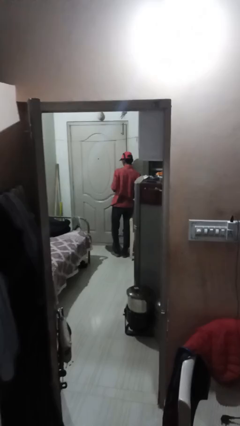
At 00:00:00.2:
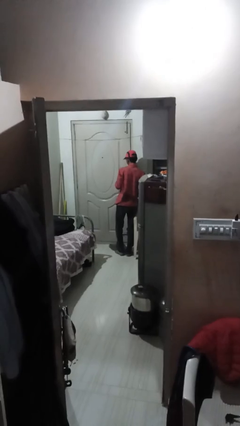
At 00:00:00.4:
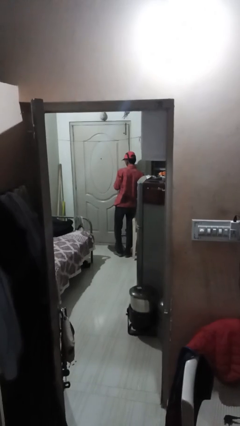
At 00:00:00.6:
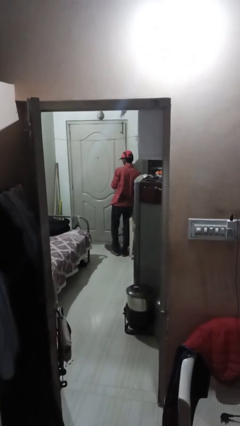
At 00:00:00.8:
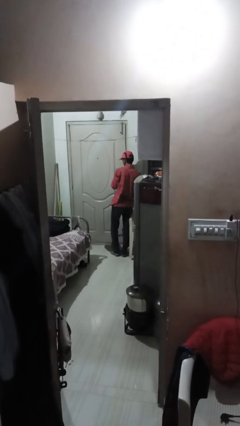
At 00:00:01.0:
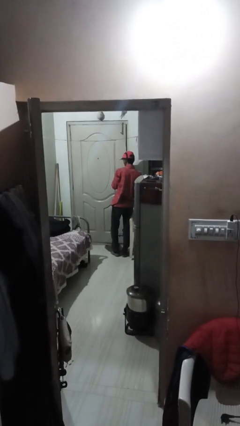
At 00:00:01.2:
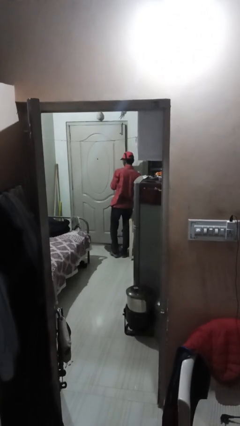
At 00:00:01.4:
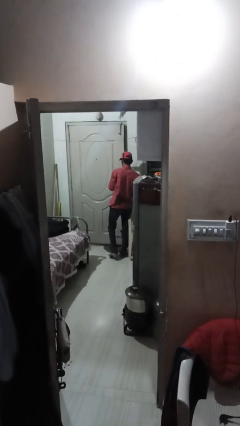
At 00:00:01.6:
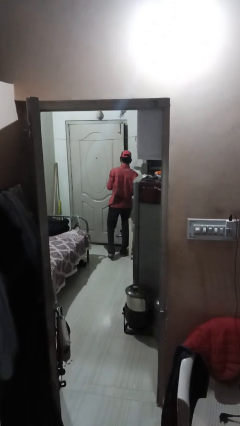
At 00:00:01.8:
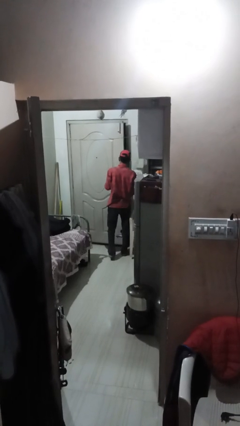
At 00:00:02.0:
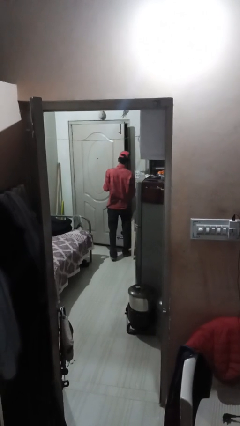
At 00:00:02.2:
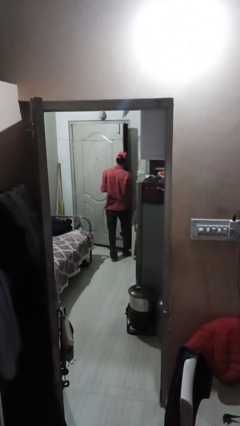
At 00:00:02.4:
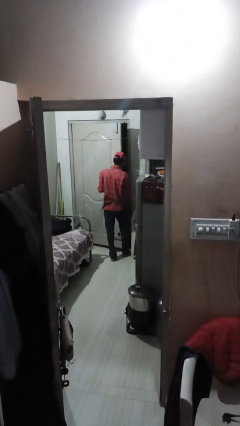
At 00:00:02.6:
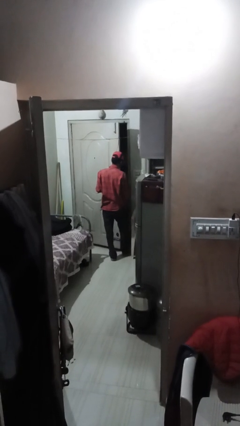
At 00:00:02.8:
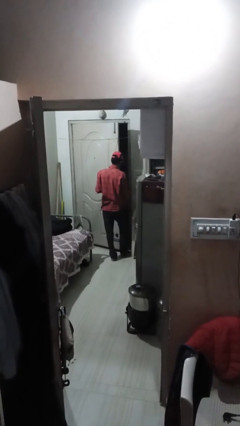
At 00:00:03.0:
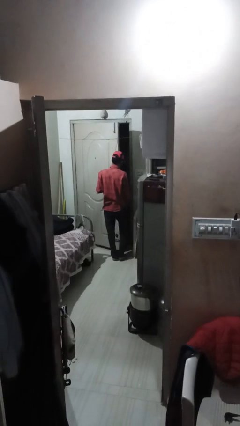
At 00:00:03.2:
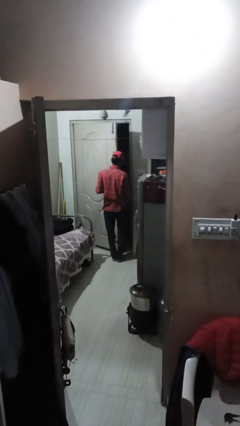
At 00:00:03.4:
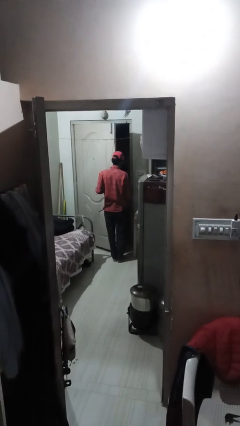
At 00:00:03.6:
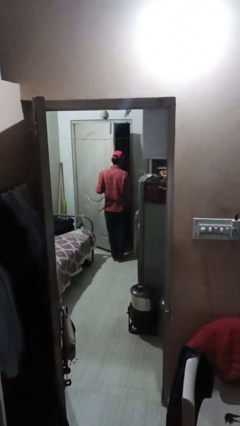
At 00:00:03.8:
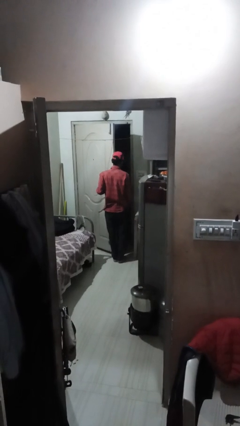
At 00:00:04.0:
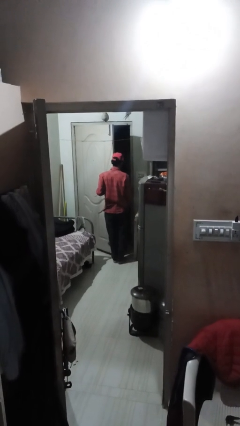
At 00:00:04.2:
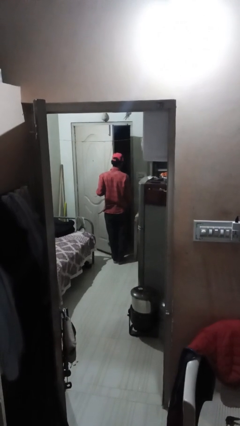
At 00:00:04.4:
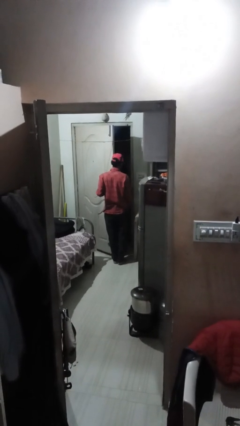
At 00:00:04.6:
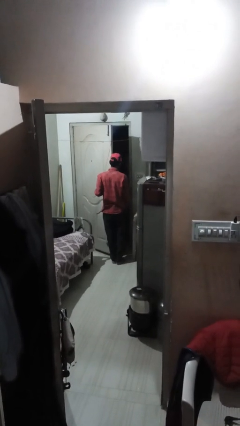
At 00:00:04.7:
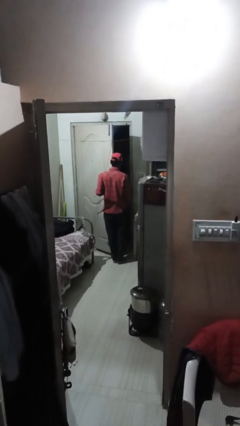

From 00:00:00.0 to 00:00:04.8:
person opens facility door

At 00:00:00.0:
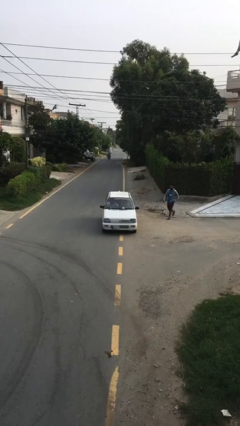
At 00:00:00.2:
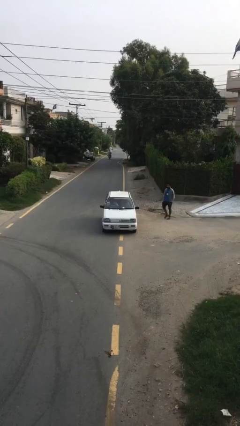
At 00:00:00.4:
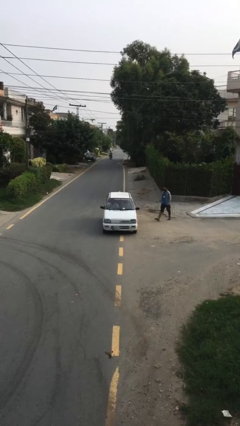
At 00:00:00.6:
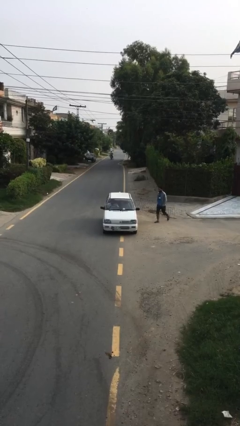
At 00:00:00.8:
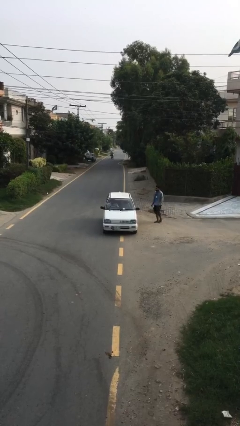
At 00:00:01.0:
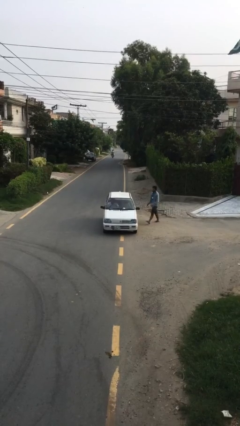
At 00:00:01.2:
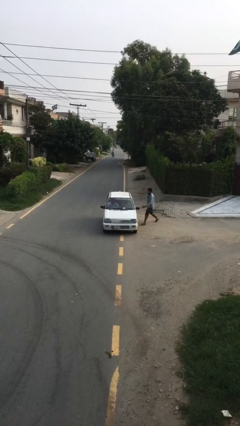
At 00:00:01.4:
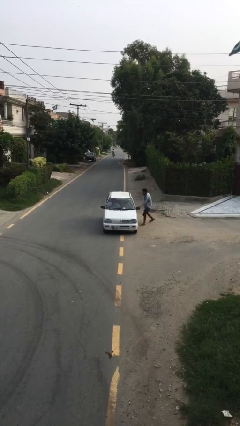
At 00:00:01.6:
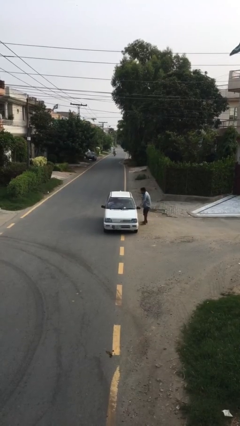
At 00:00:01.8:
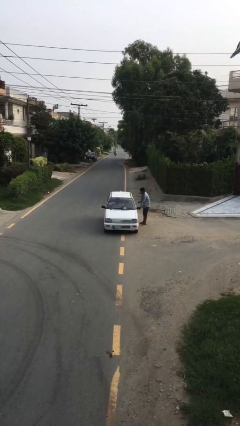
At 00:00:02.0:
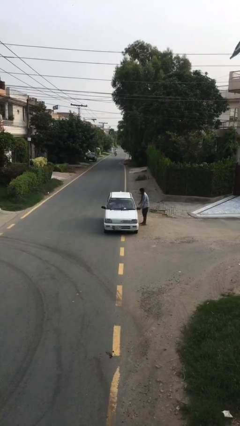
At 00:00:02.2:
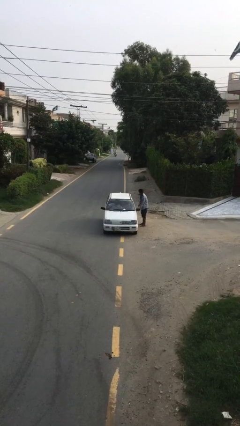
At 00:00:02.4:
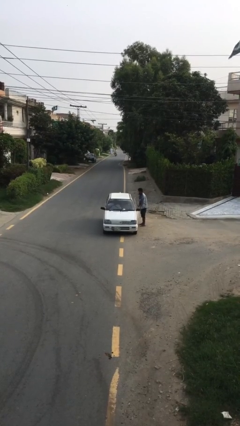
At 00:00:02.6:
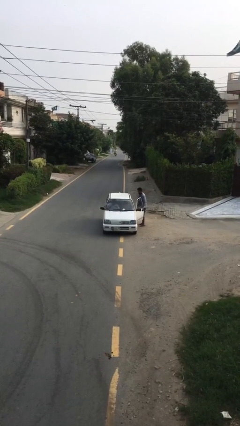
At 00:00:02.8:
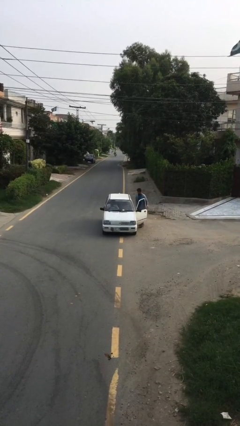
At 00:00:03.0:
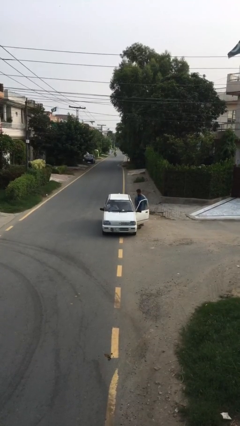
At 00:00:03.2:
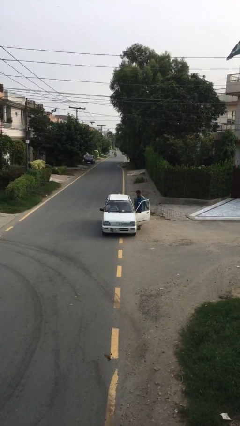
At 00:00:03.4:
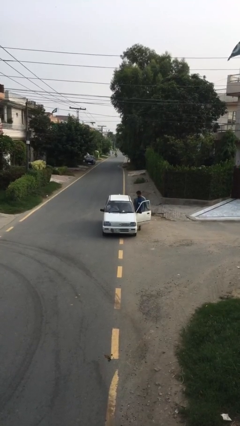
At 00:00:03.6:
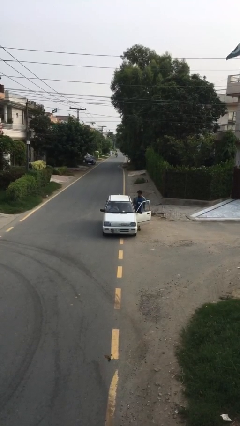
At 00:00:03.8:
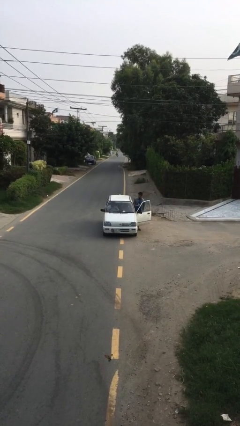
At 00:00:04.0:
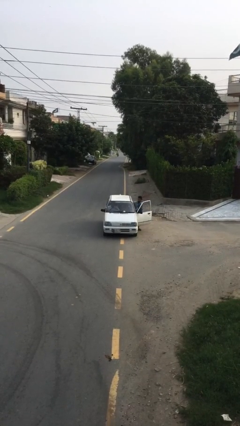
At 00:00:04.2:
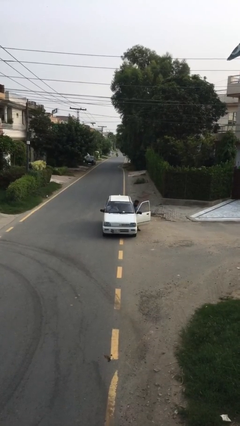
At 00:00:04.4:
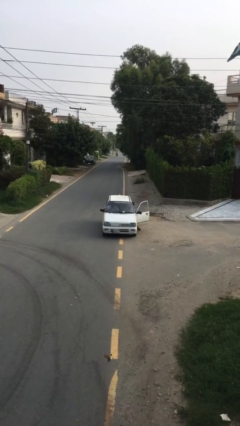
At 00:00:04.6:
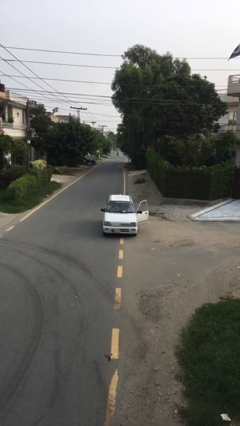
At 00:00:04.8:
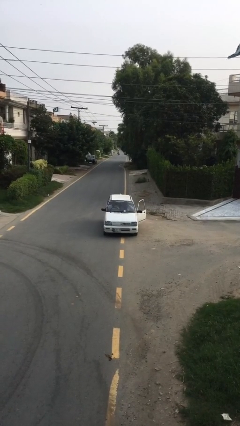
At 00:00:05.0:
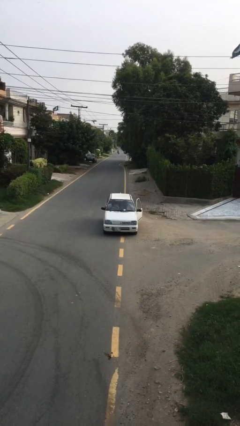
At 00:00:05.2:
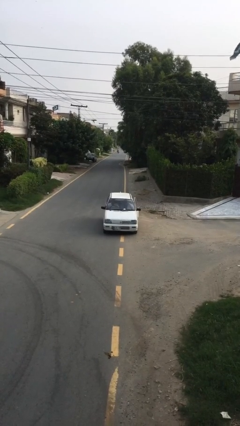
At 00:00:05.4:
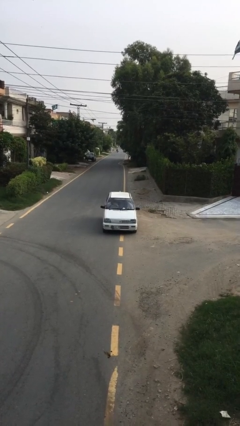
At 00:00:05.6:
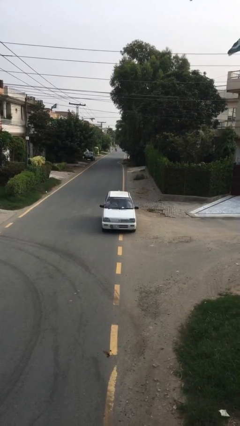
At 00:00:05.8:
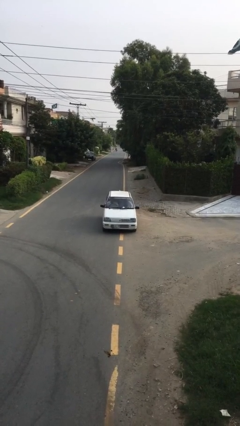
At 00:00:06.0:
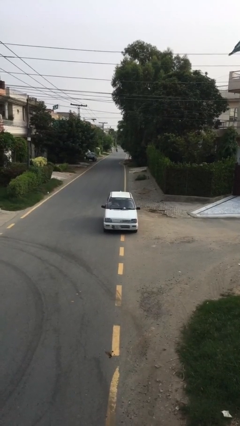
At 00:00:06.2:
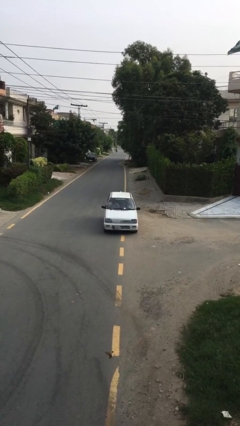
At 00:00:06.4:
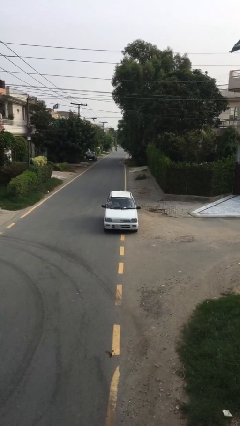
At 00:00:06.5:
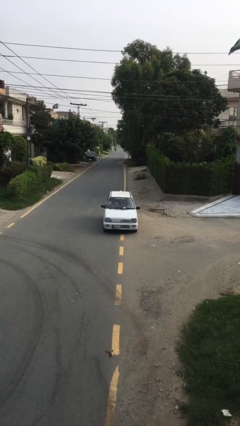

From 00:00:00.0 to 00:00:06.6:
car picks up person

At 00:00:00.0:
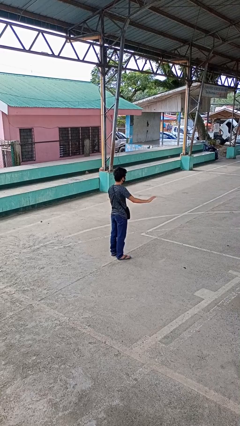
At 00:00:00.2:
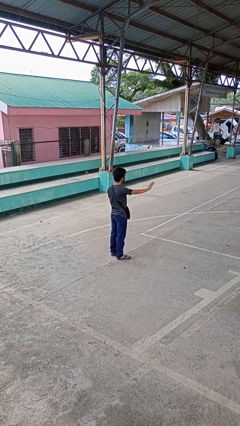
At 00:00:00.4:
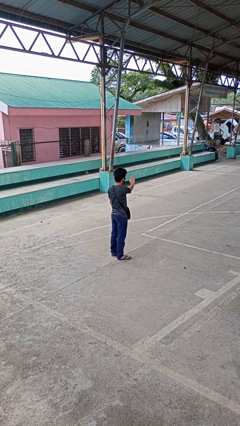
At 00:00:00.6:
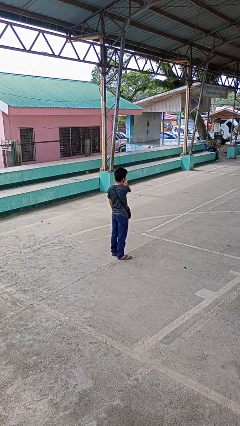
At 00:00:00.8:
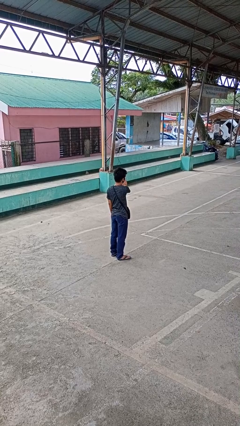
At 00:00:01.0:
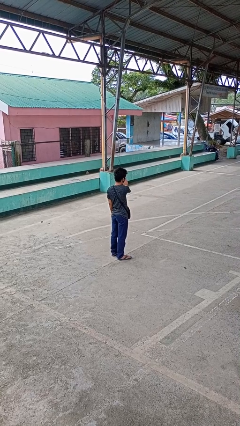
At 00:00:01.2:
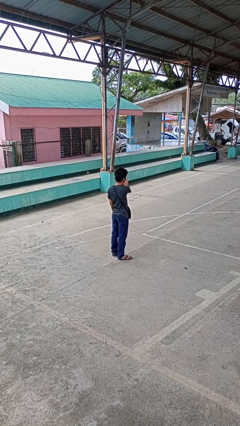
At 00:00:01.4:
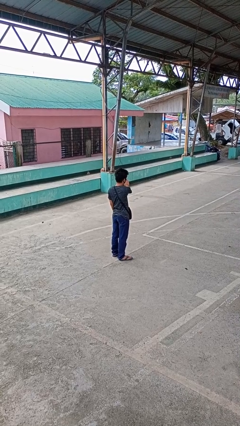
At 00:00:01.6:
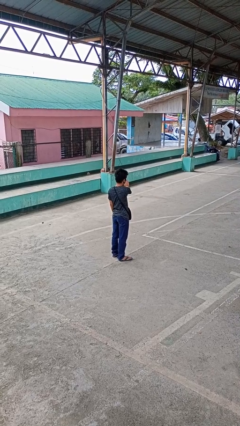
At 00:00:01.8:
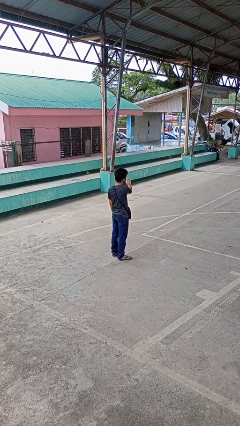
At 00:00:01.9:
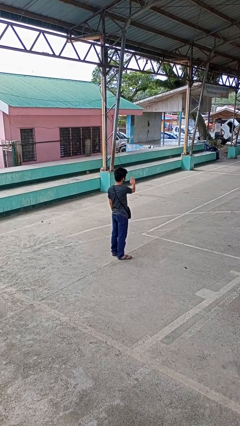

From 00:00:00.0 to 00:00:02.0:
person gestures swipe left

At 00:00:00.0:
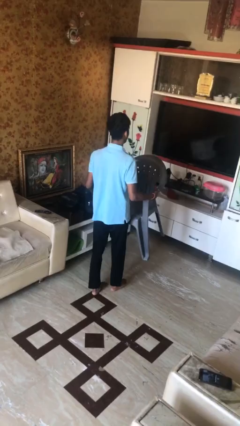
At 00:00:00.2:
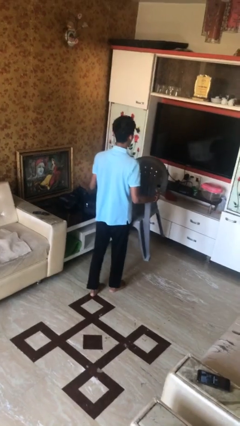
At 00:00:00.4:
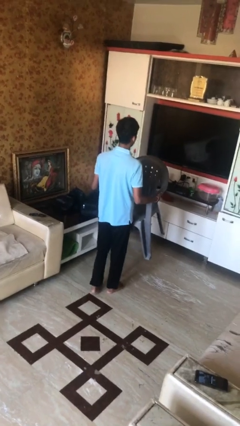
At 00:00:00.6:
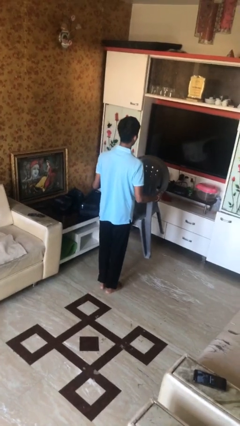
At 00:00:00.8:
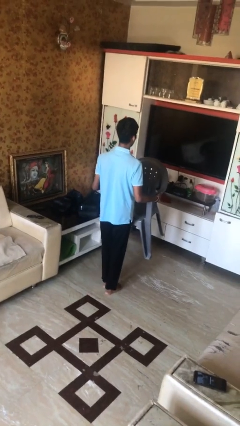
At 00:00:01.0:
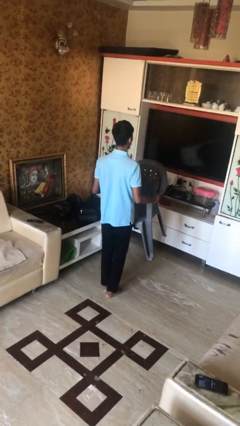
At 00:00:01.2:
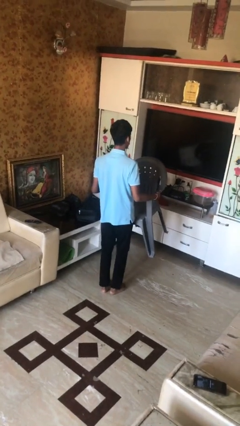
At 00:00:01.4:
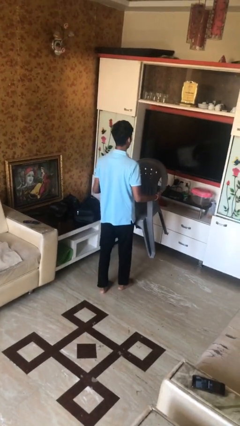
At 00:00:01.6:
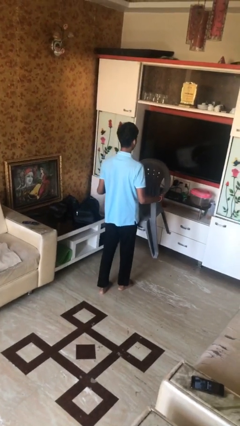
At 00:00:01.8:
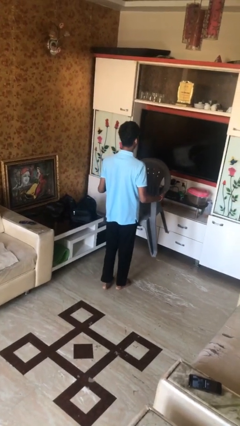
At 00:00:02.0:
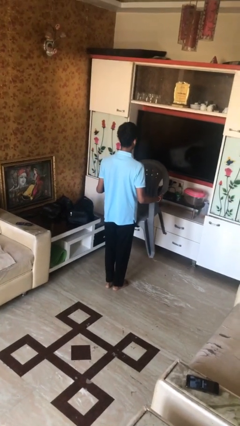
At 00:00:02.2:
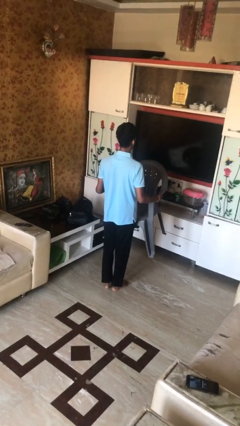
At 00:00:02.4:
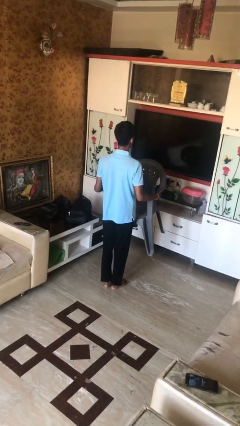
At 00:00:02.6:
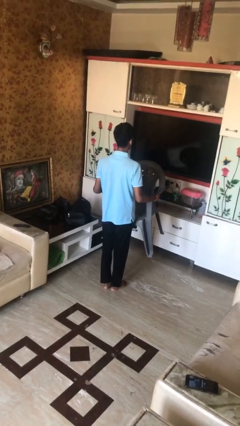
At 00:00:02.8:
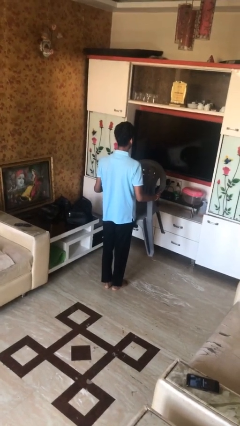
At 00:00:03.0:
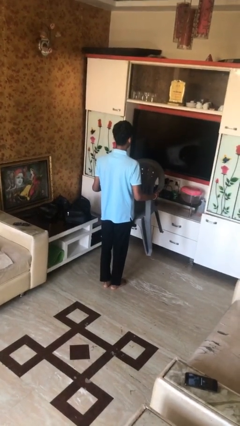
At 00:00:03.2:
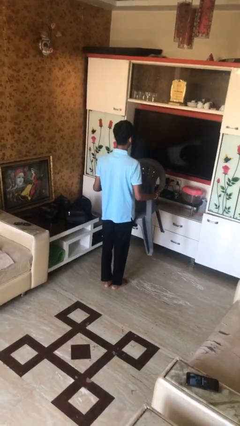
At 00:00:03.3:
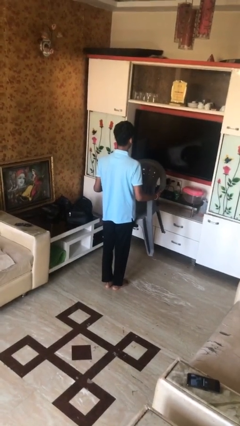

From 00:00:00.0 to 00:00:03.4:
person carries furniture

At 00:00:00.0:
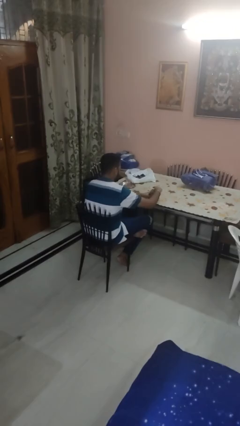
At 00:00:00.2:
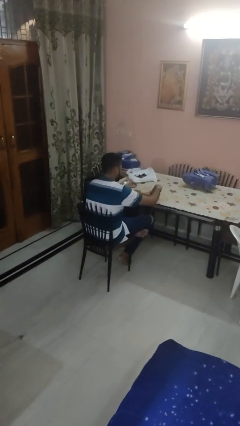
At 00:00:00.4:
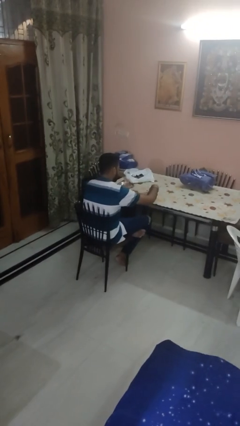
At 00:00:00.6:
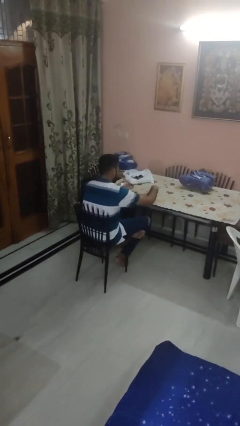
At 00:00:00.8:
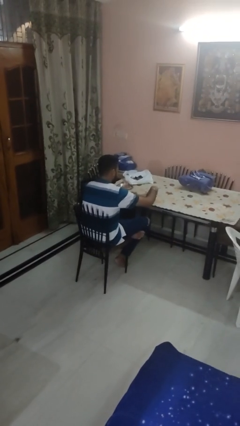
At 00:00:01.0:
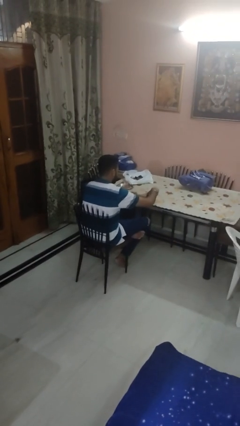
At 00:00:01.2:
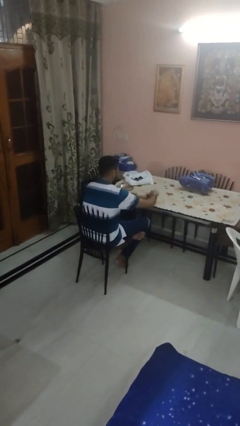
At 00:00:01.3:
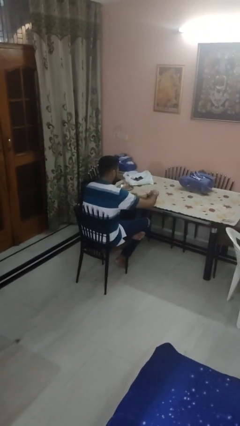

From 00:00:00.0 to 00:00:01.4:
person closes jar
